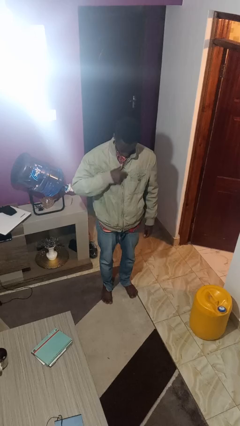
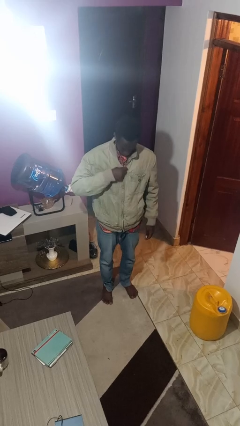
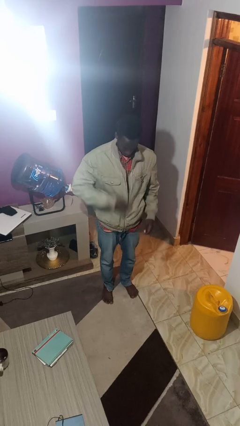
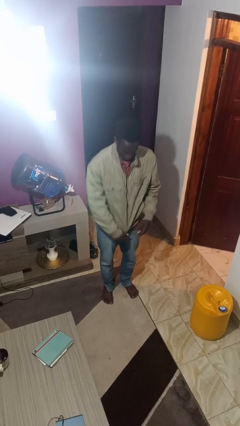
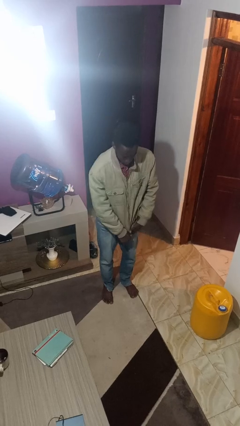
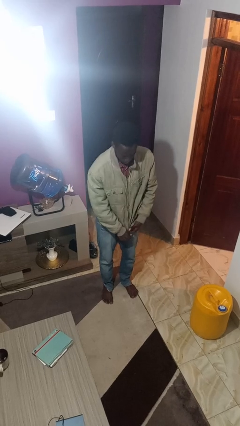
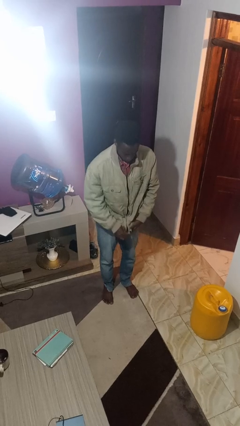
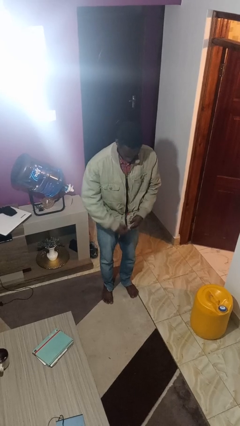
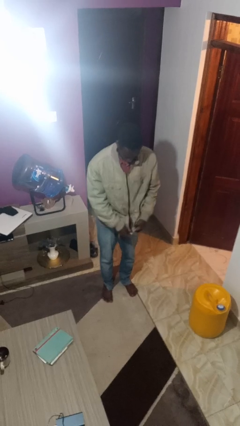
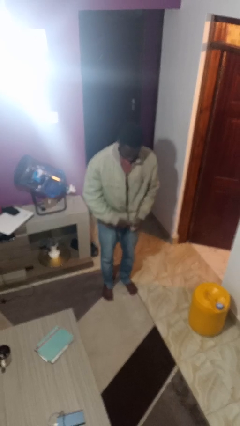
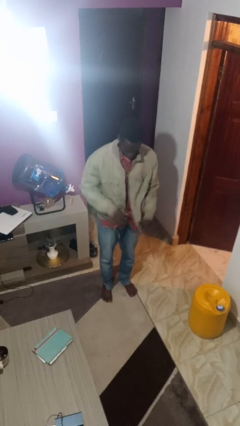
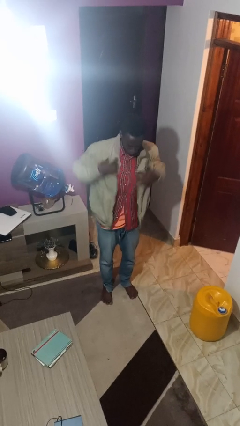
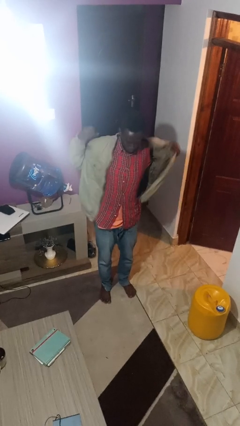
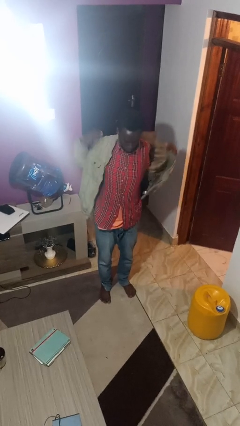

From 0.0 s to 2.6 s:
person unzips jacket

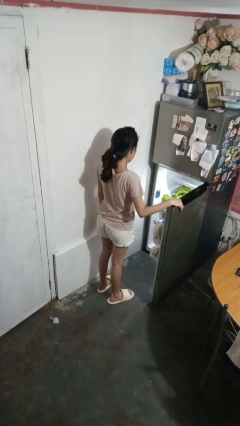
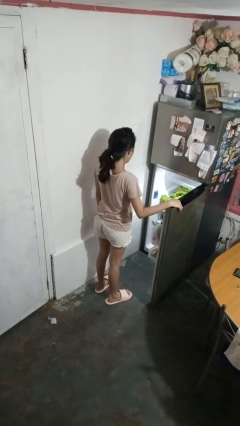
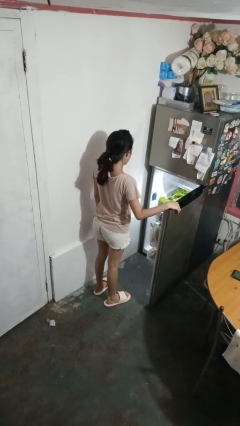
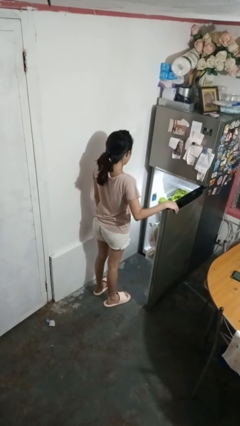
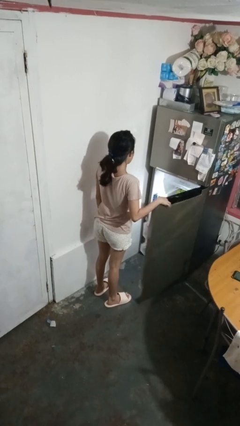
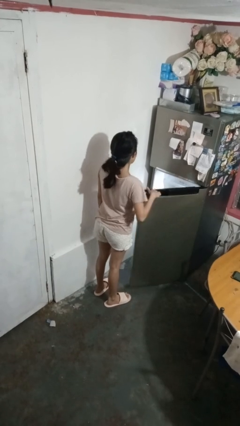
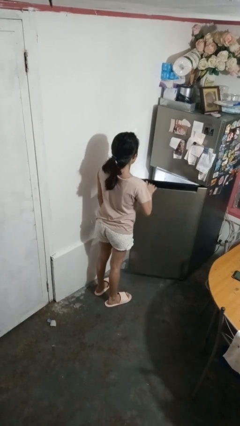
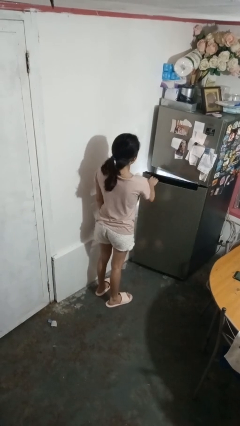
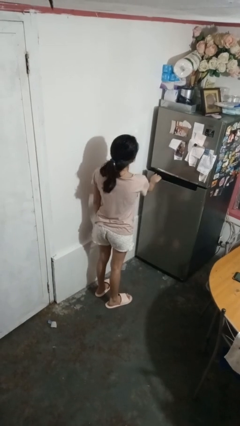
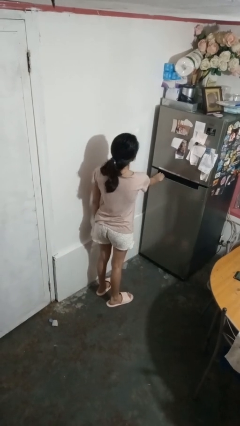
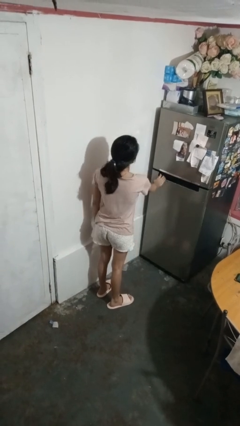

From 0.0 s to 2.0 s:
person closes refrigerator

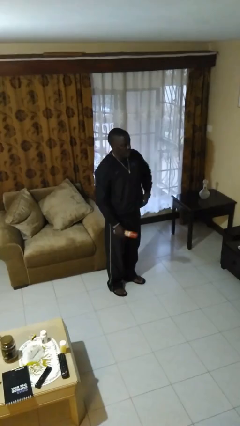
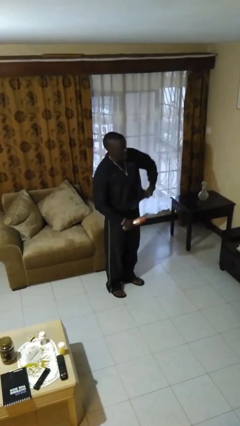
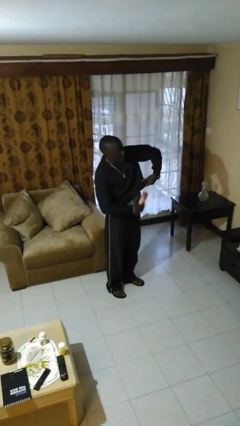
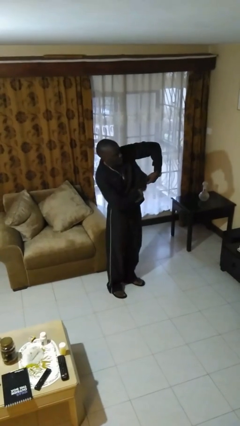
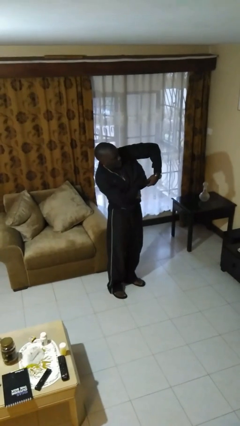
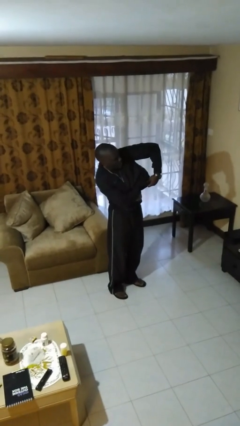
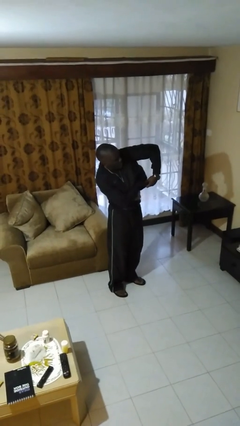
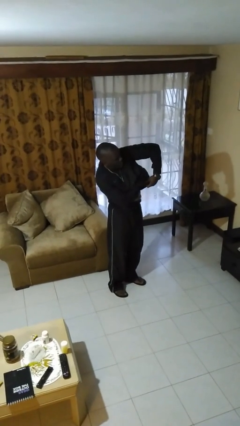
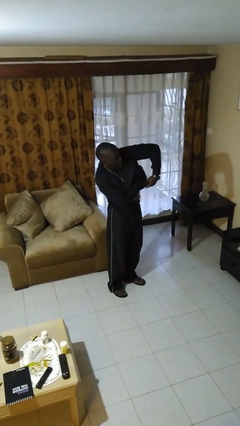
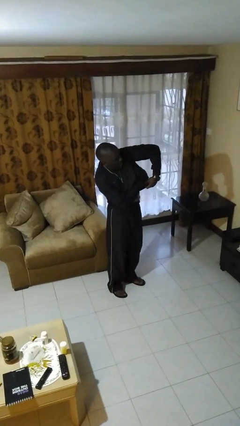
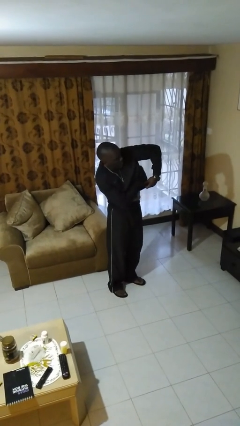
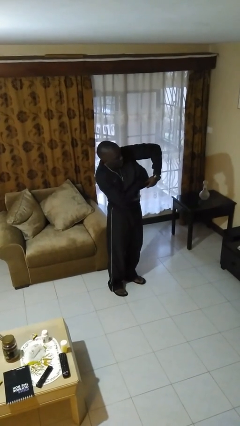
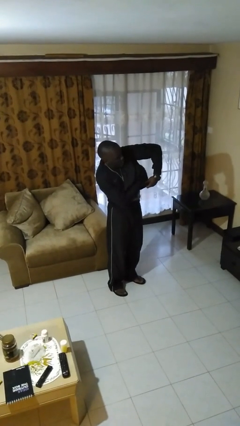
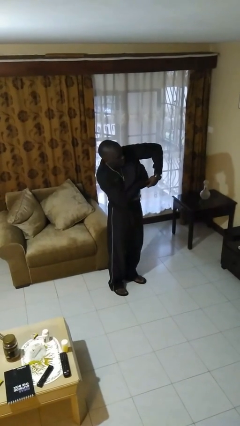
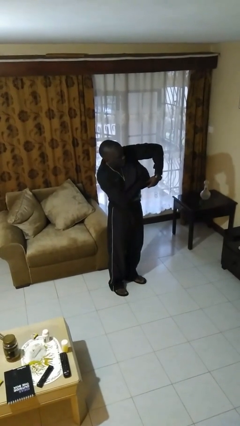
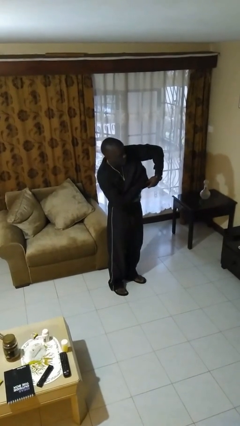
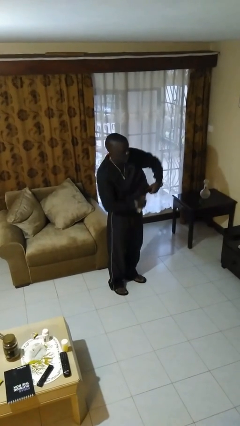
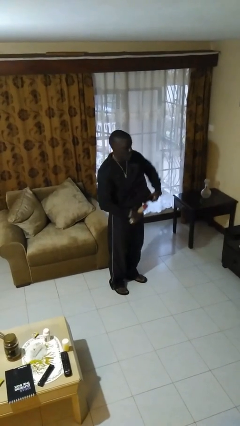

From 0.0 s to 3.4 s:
person applies deodorant

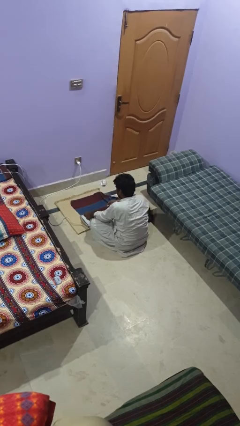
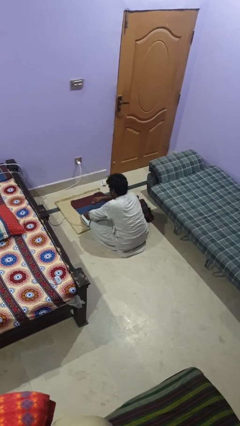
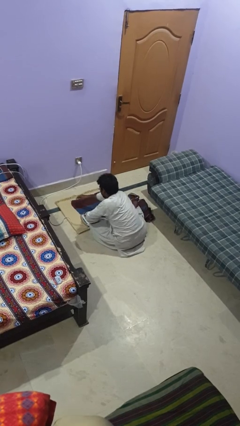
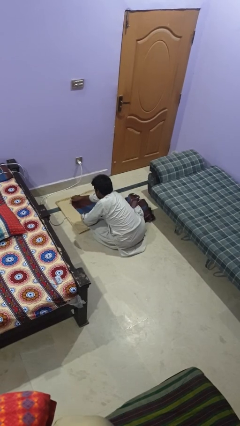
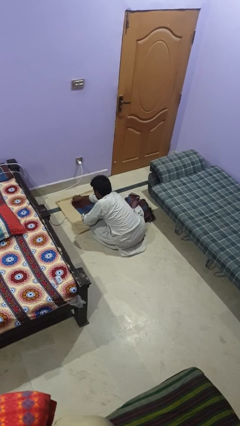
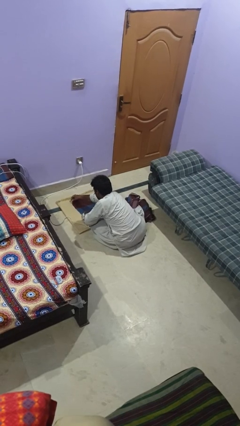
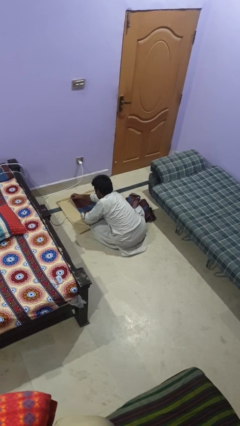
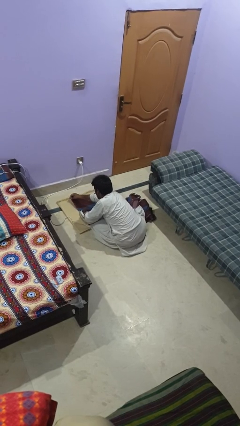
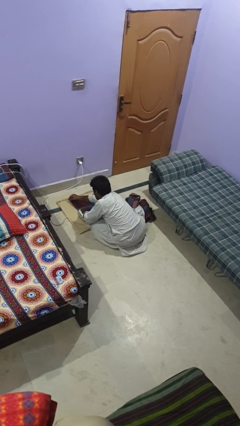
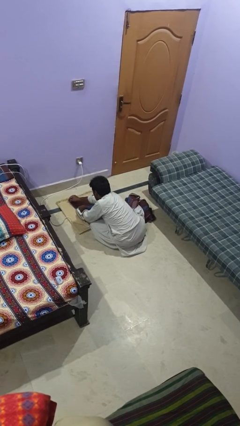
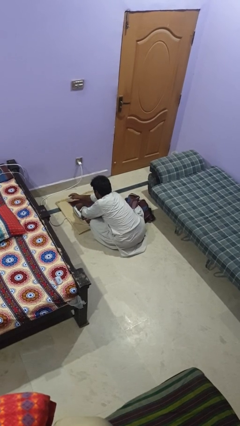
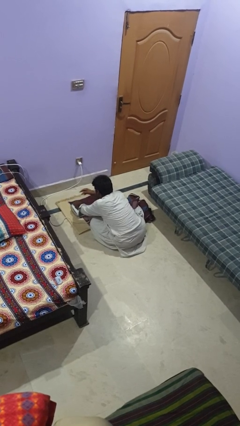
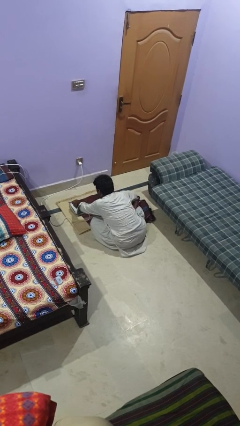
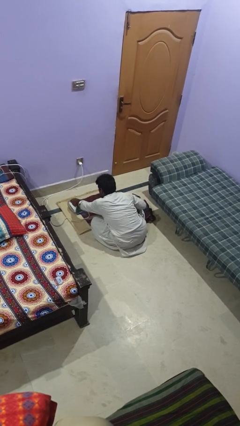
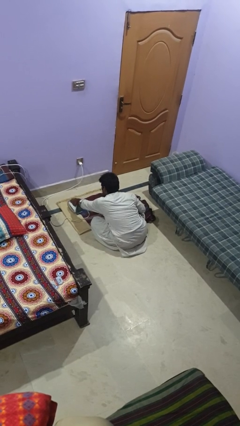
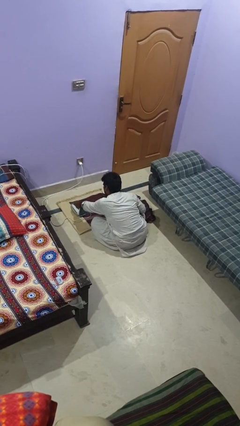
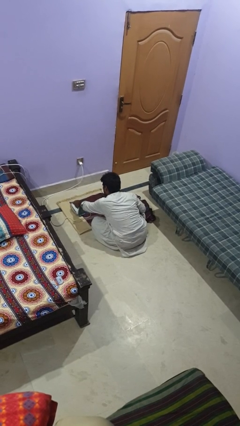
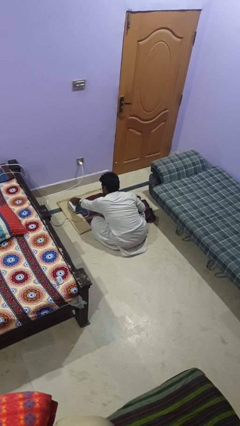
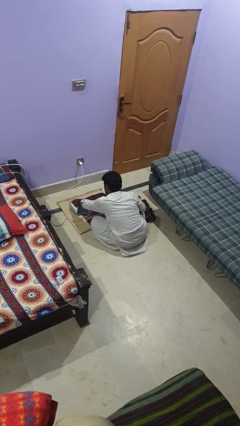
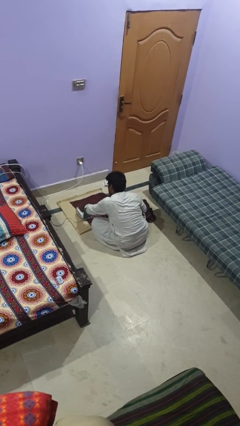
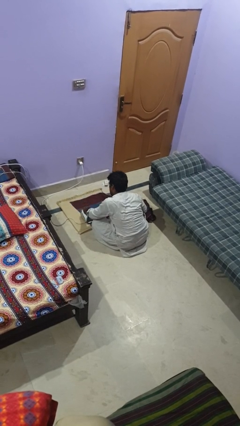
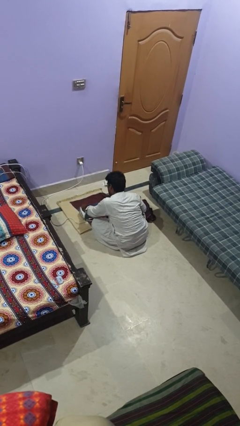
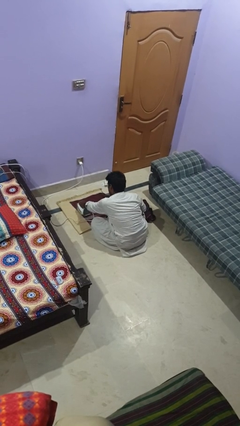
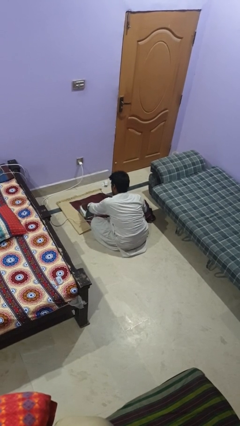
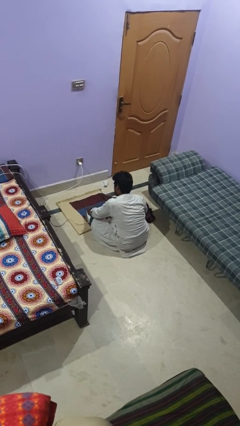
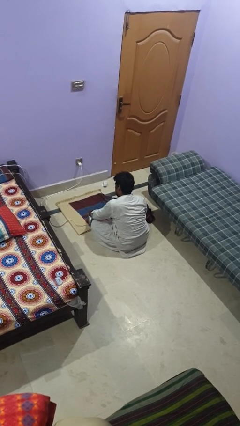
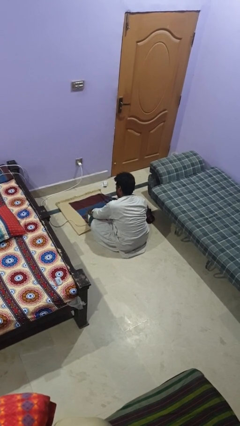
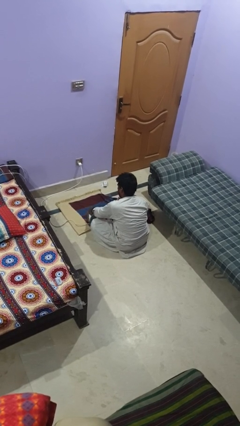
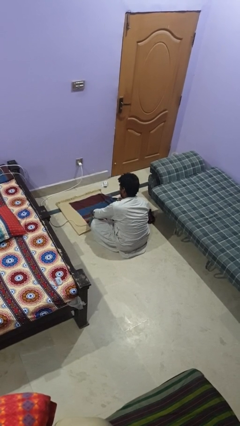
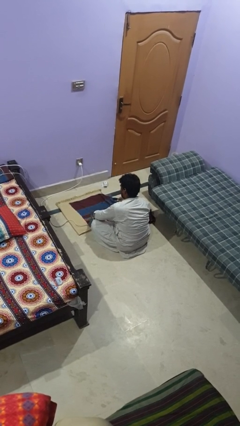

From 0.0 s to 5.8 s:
person irons clothes

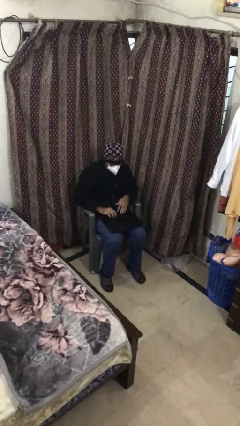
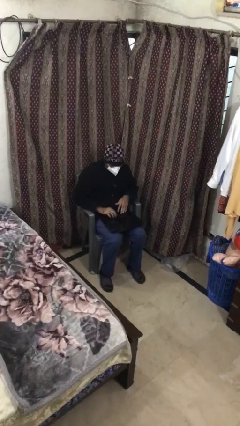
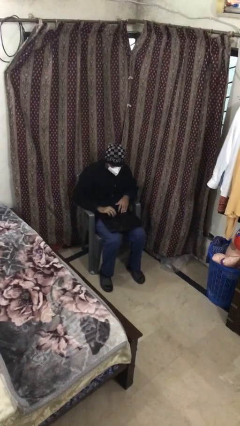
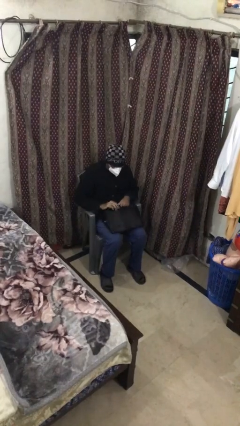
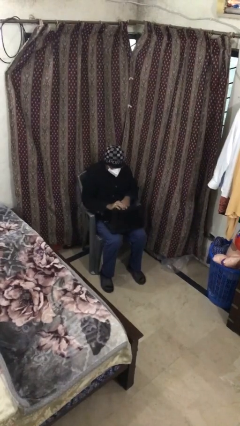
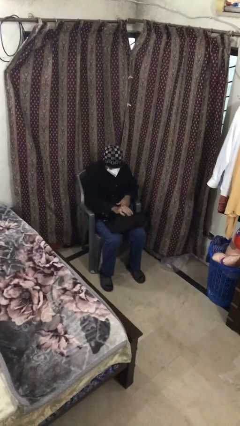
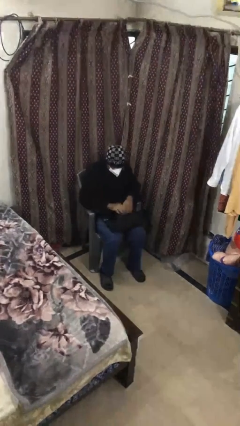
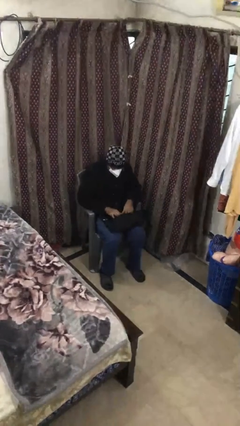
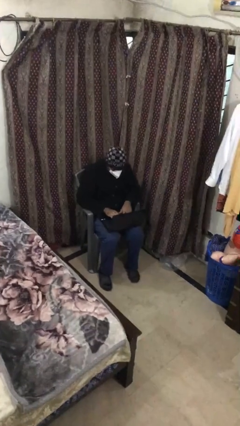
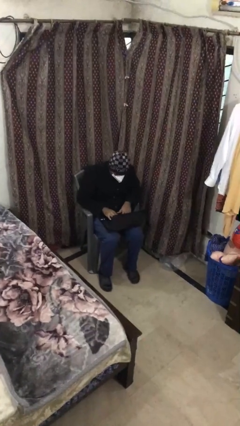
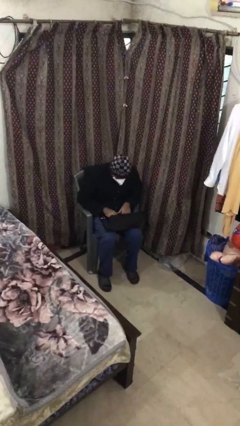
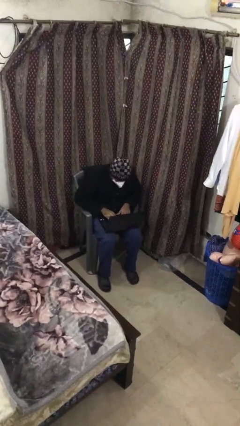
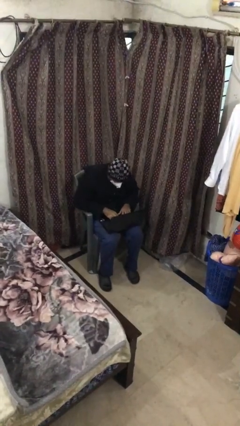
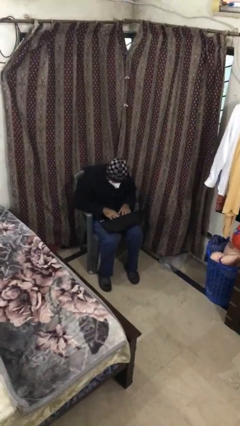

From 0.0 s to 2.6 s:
person interacts with laptop

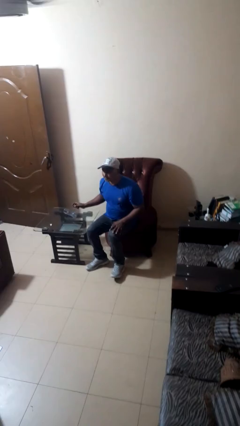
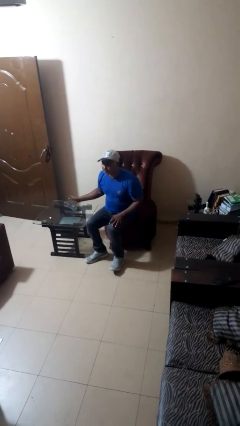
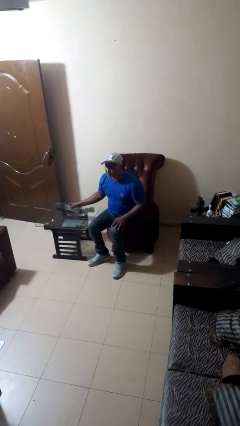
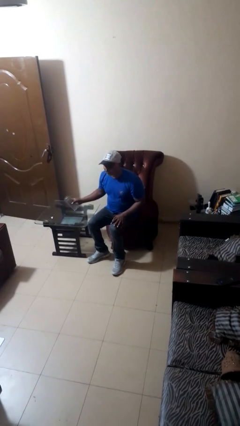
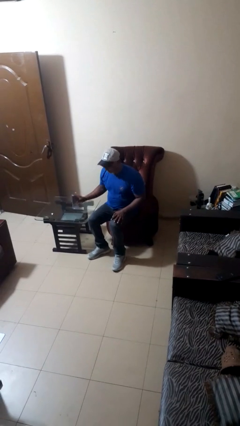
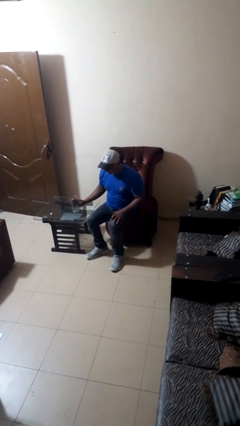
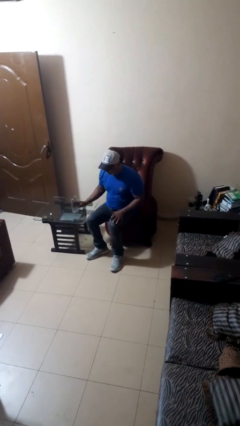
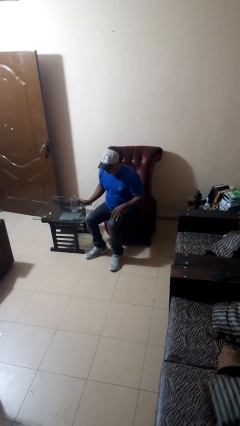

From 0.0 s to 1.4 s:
person sets upright glass
